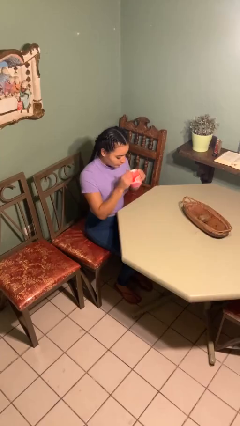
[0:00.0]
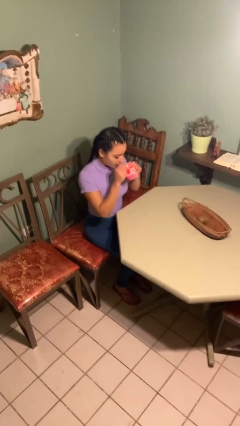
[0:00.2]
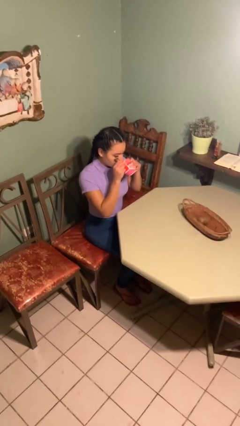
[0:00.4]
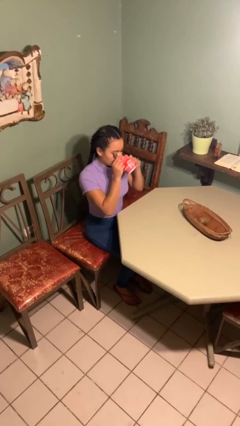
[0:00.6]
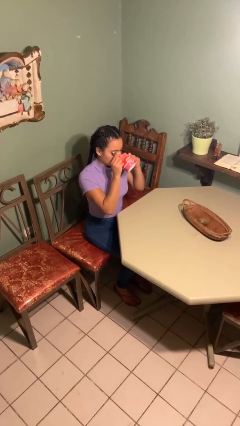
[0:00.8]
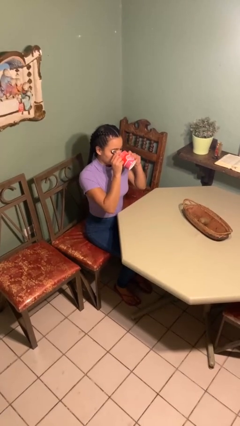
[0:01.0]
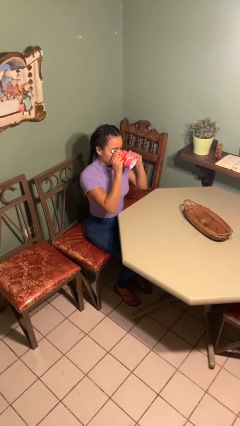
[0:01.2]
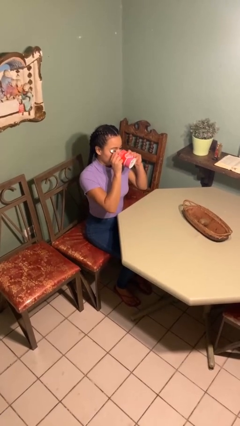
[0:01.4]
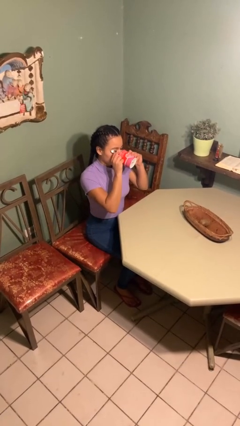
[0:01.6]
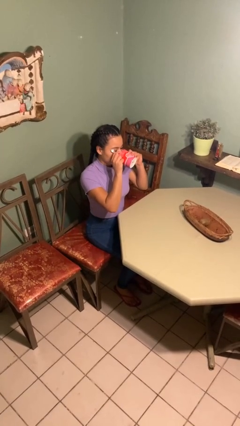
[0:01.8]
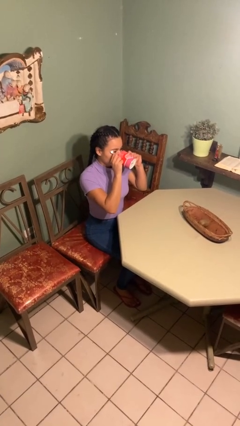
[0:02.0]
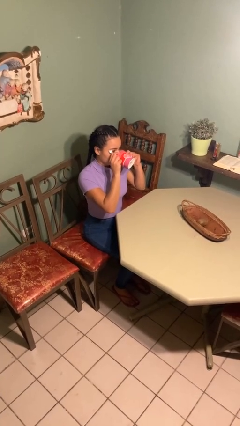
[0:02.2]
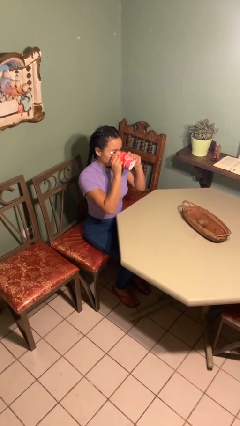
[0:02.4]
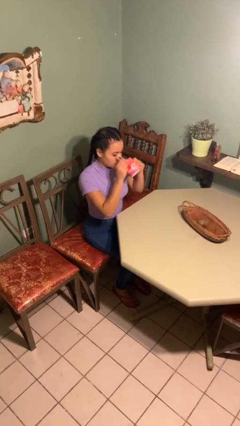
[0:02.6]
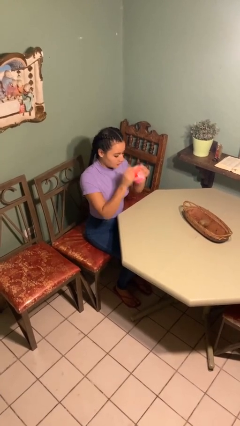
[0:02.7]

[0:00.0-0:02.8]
person drinks from mug

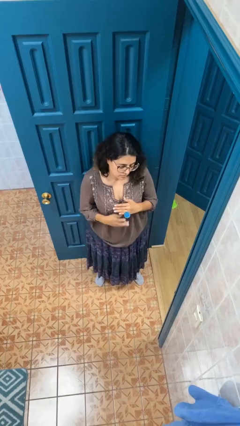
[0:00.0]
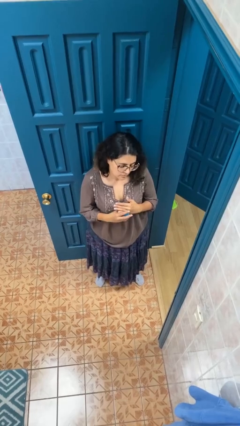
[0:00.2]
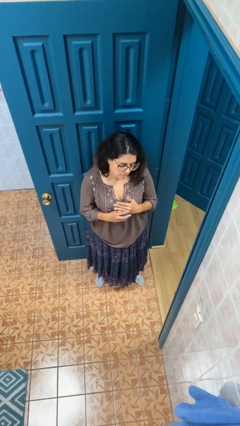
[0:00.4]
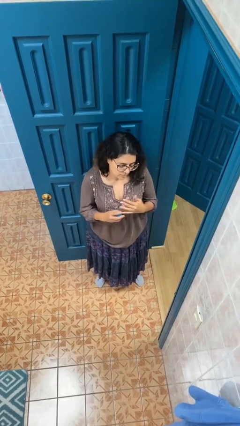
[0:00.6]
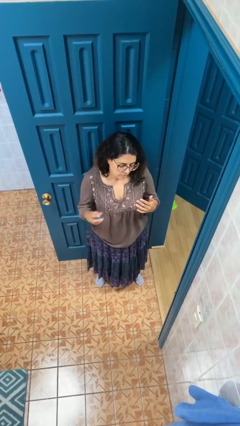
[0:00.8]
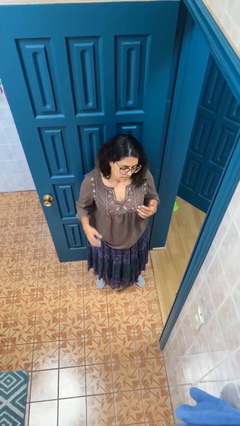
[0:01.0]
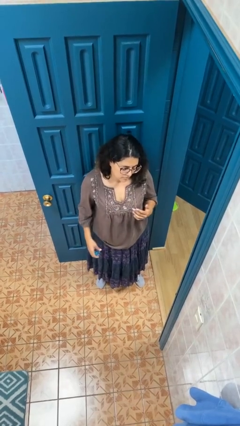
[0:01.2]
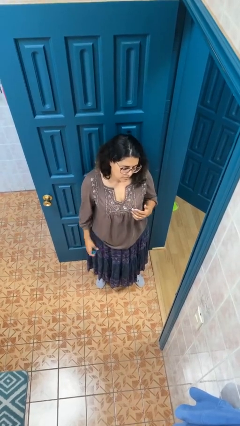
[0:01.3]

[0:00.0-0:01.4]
person takes off ring

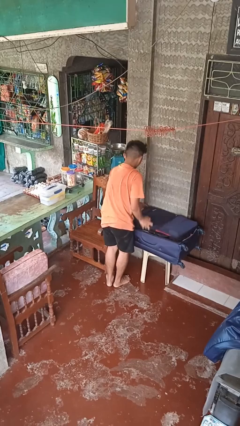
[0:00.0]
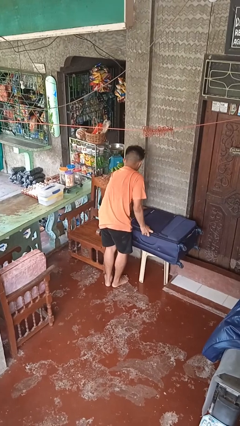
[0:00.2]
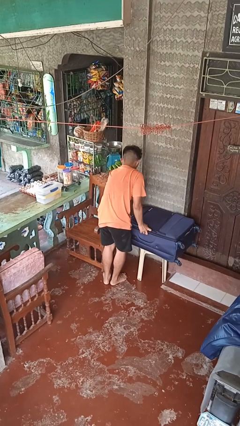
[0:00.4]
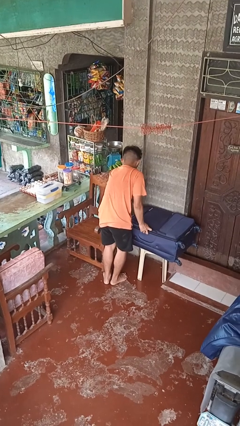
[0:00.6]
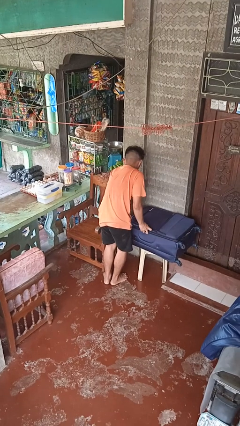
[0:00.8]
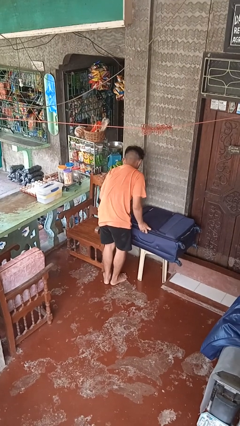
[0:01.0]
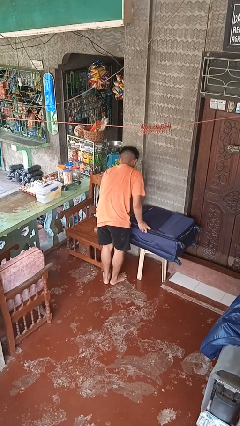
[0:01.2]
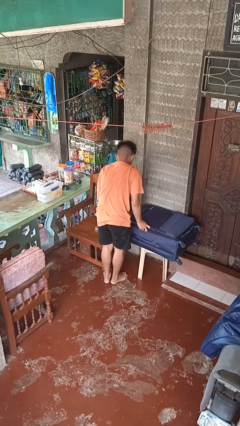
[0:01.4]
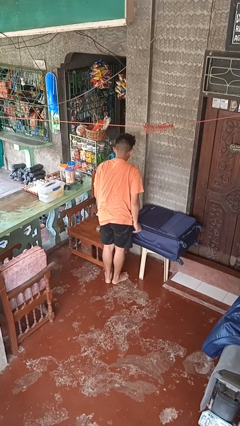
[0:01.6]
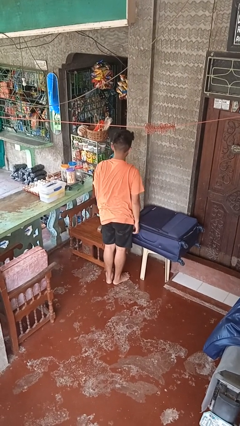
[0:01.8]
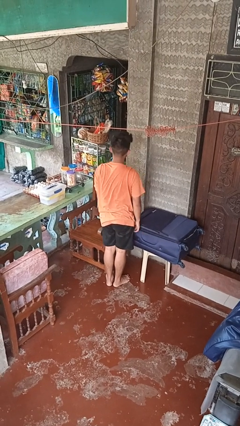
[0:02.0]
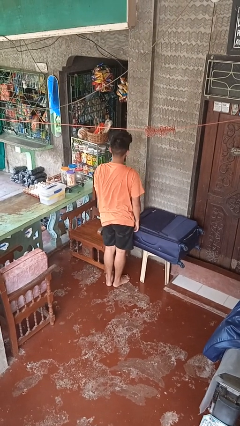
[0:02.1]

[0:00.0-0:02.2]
person closes suitcase

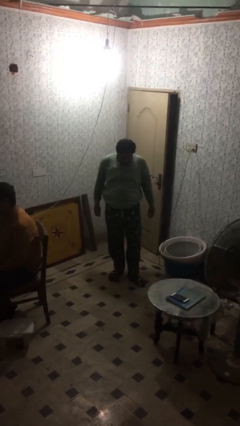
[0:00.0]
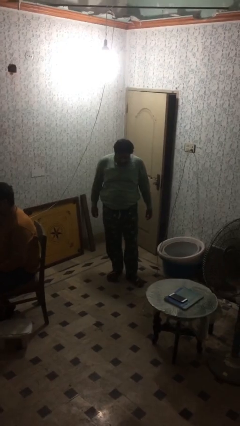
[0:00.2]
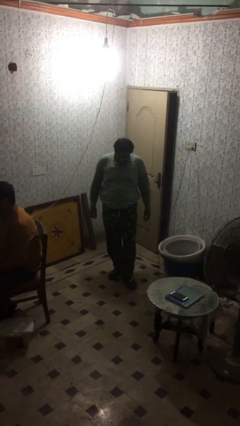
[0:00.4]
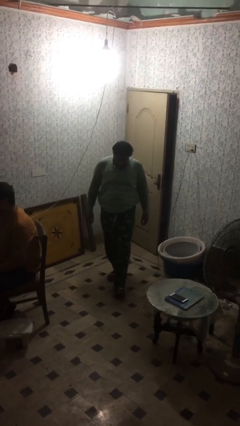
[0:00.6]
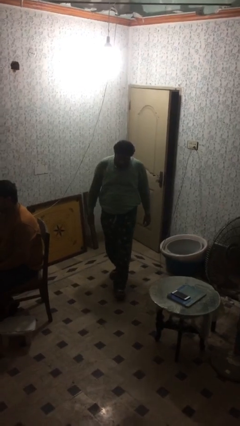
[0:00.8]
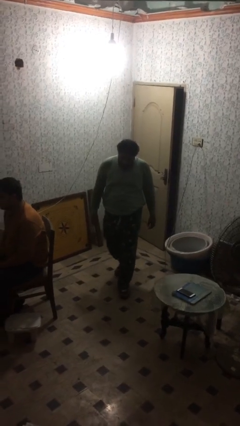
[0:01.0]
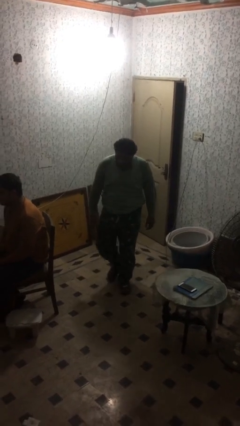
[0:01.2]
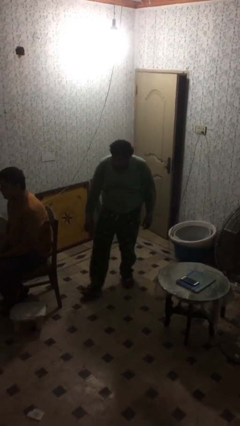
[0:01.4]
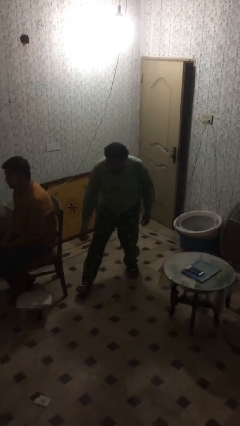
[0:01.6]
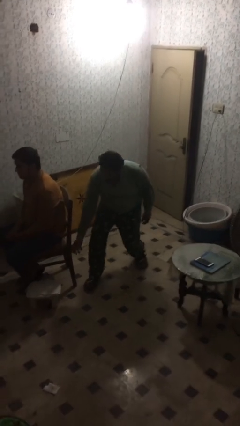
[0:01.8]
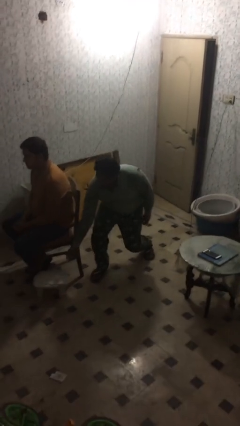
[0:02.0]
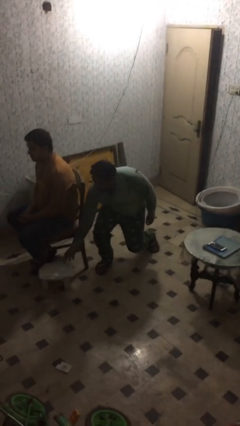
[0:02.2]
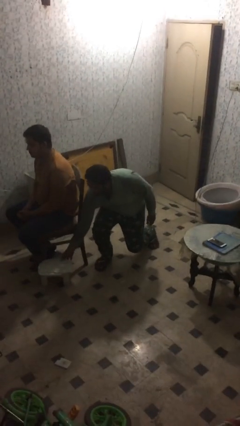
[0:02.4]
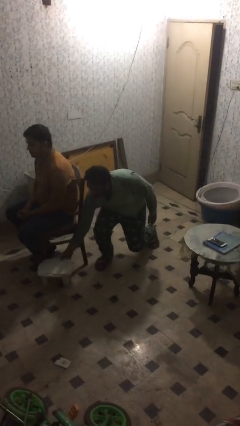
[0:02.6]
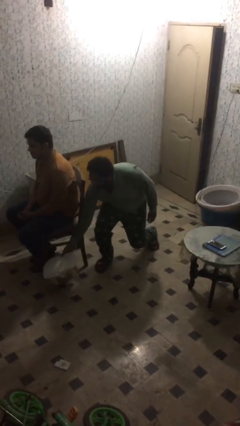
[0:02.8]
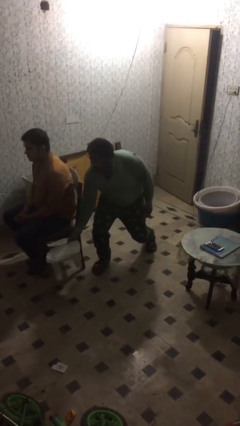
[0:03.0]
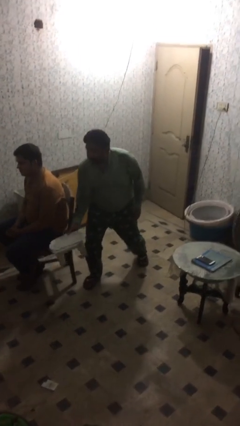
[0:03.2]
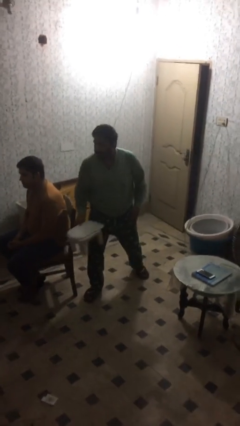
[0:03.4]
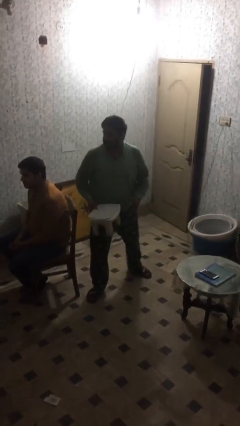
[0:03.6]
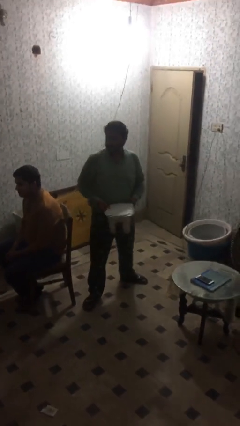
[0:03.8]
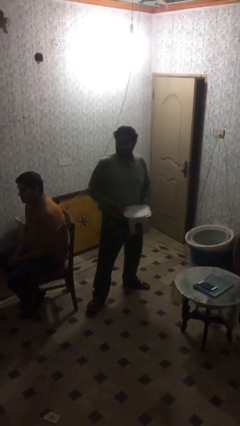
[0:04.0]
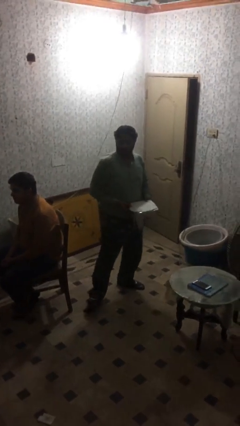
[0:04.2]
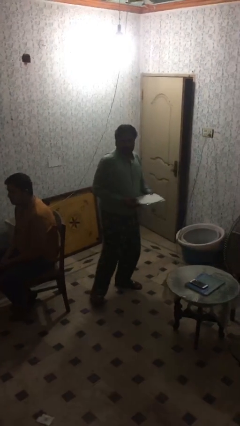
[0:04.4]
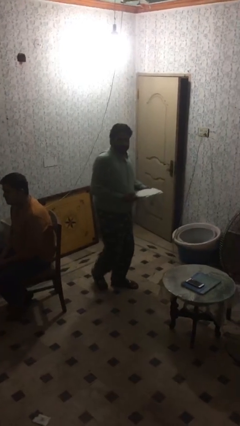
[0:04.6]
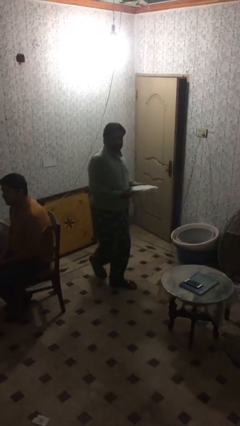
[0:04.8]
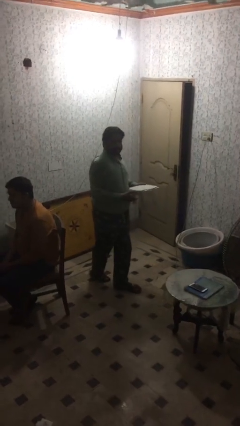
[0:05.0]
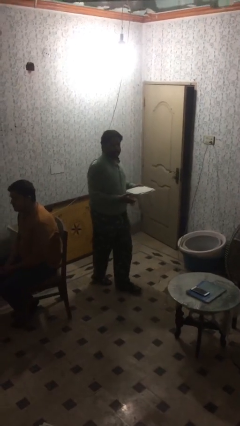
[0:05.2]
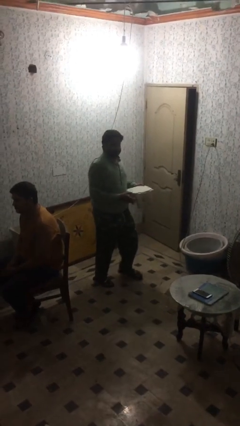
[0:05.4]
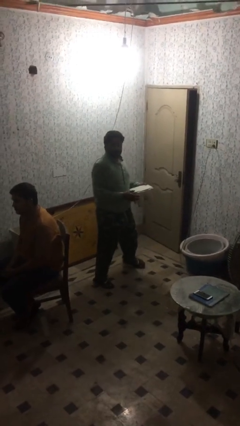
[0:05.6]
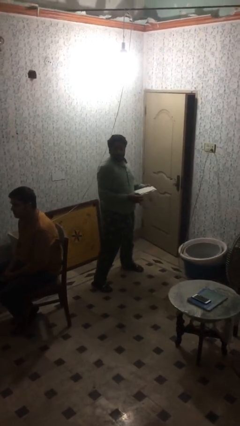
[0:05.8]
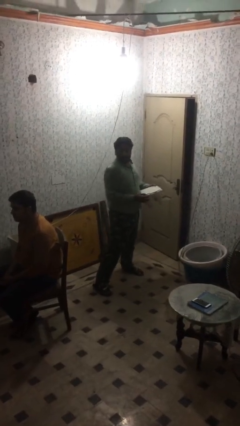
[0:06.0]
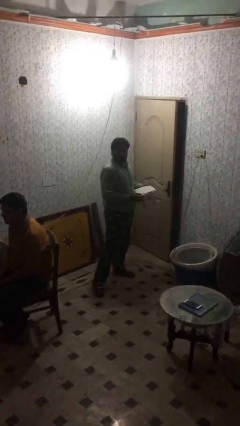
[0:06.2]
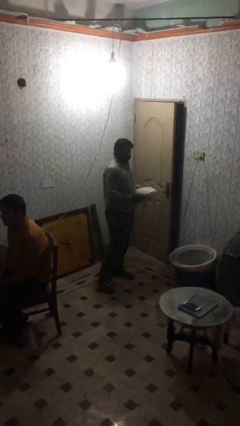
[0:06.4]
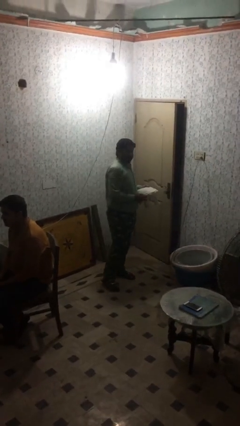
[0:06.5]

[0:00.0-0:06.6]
person steals object from person

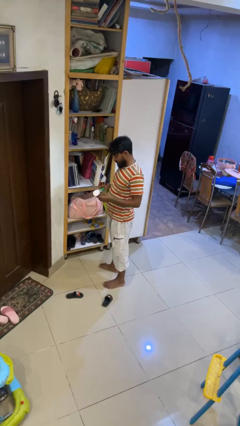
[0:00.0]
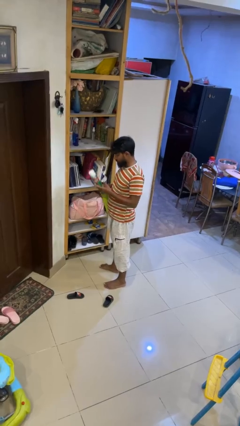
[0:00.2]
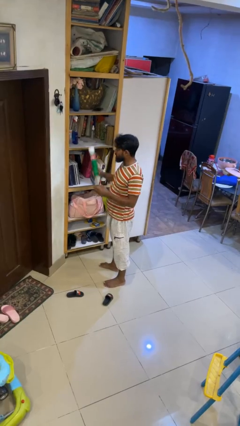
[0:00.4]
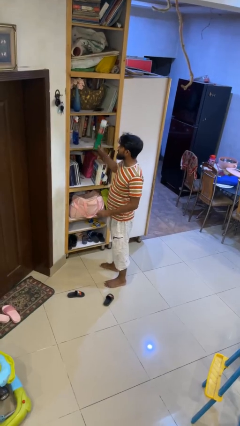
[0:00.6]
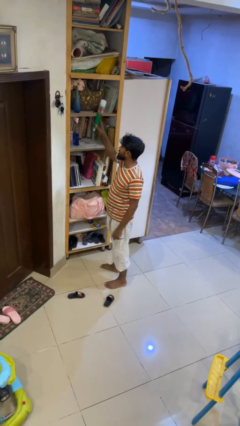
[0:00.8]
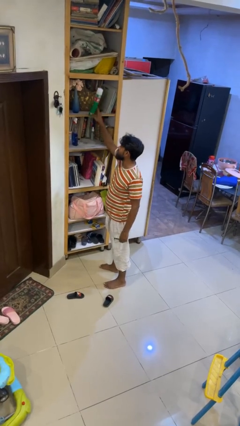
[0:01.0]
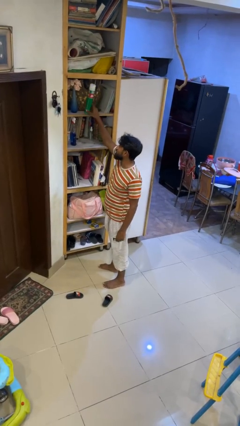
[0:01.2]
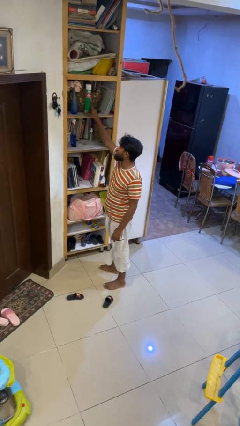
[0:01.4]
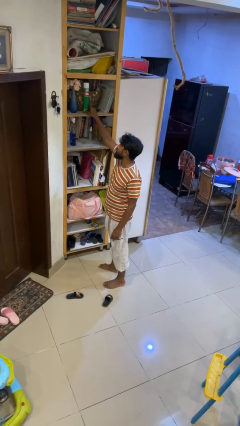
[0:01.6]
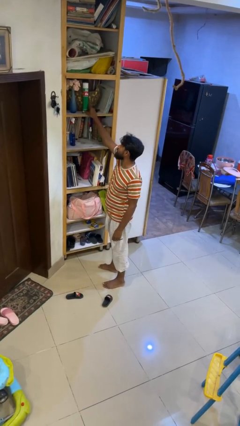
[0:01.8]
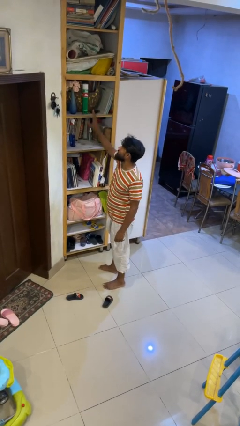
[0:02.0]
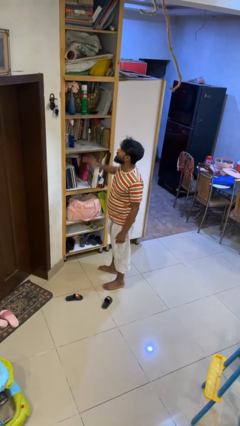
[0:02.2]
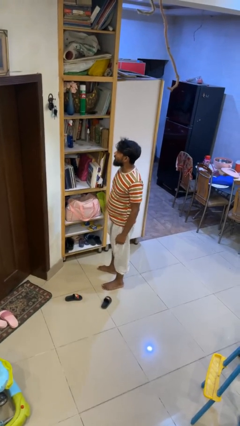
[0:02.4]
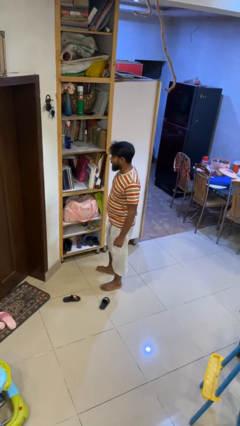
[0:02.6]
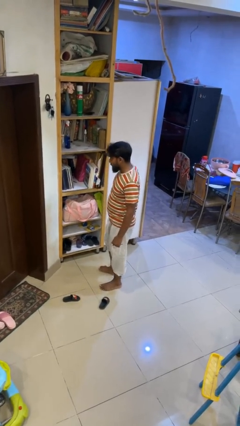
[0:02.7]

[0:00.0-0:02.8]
person puts down object on shelf

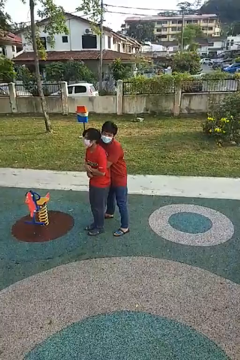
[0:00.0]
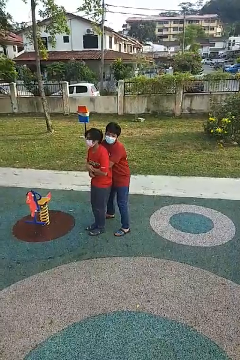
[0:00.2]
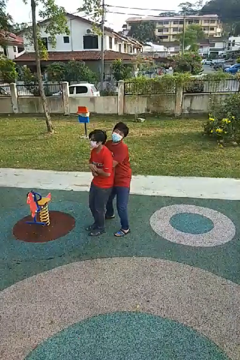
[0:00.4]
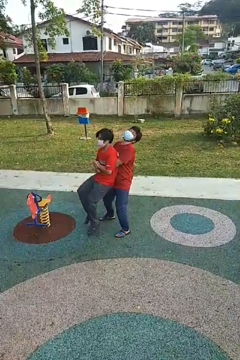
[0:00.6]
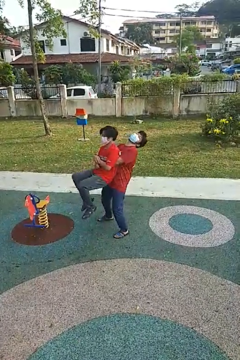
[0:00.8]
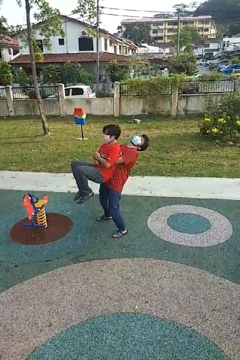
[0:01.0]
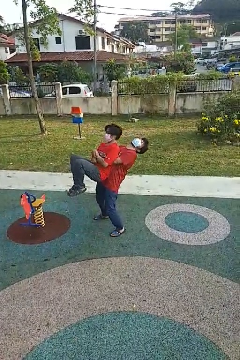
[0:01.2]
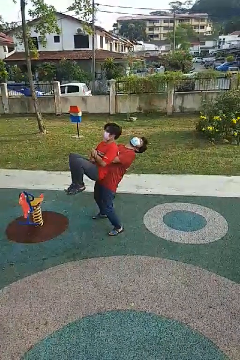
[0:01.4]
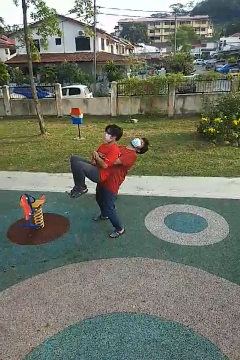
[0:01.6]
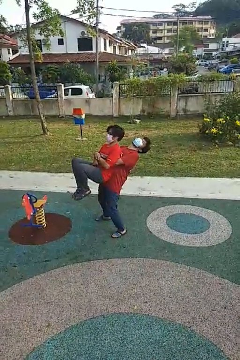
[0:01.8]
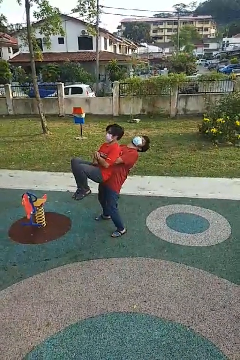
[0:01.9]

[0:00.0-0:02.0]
person picks up person
